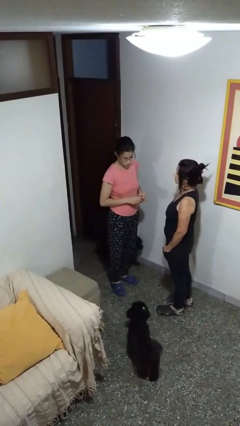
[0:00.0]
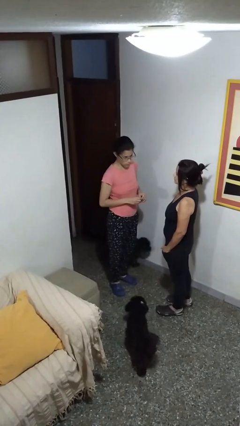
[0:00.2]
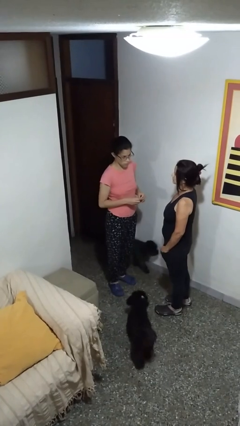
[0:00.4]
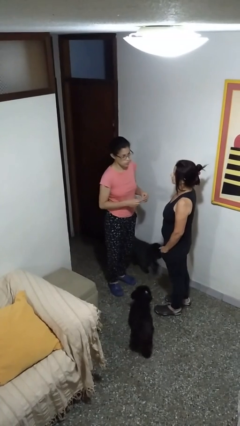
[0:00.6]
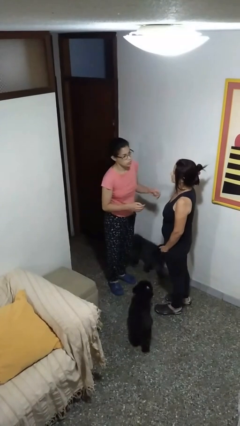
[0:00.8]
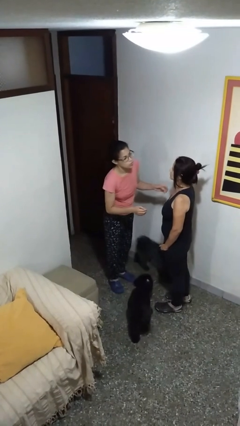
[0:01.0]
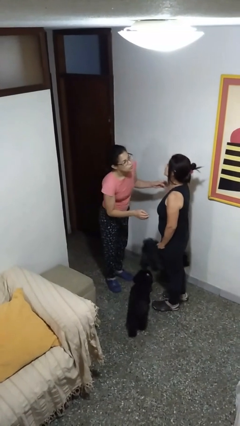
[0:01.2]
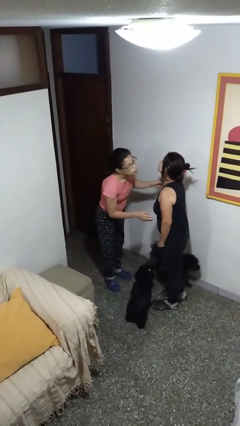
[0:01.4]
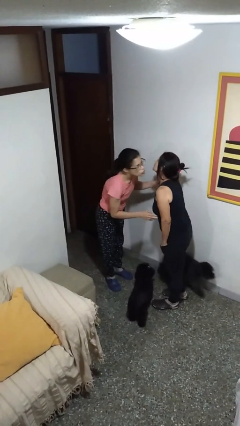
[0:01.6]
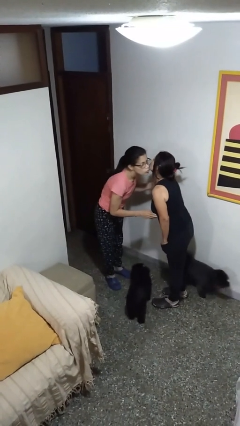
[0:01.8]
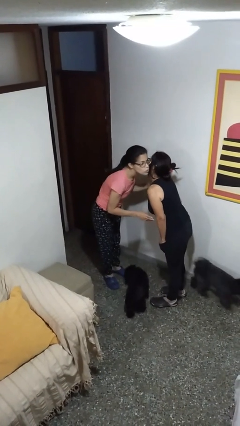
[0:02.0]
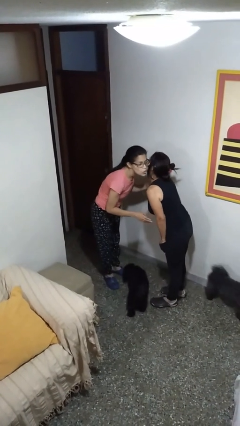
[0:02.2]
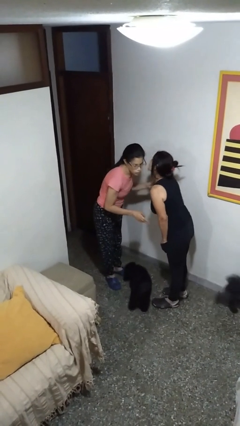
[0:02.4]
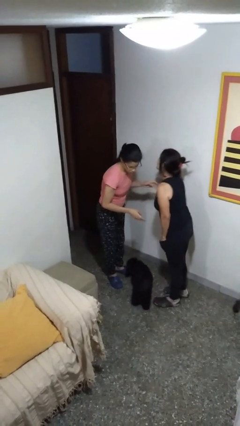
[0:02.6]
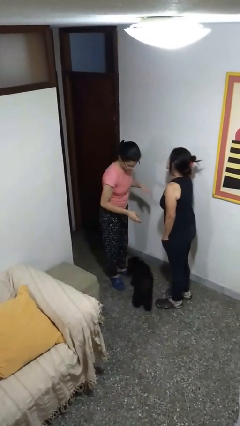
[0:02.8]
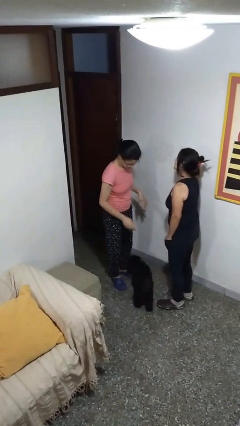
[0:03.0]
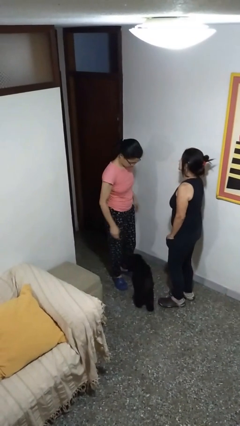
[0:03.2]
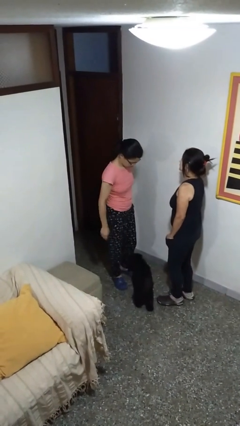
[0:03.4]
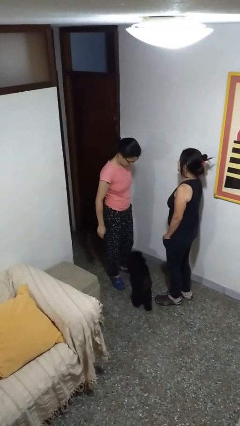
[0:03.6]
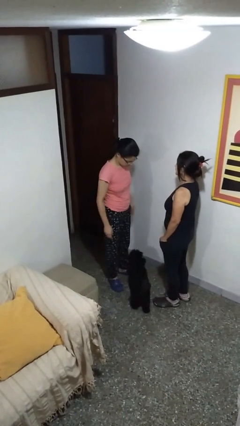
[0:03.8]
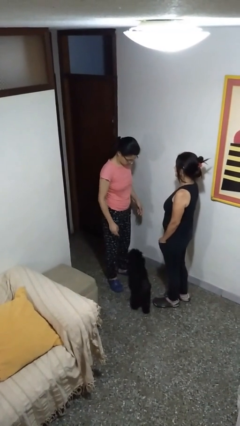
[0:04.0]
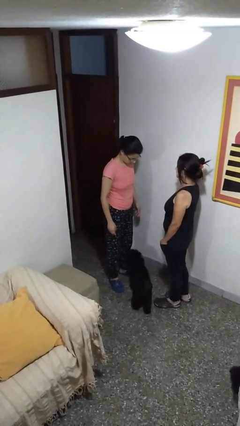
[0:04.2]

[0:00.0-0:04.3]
person kisses cheek of person

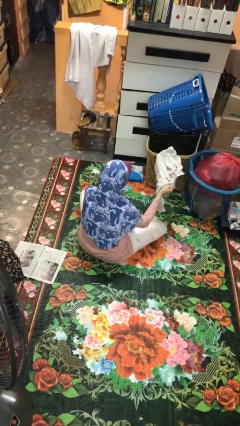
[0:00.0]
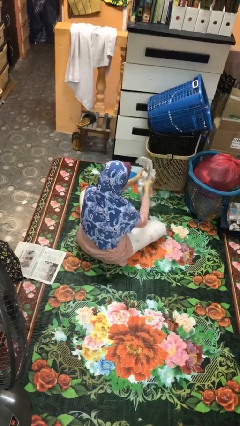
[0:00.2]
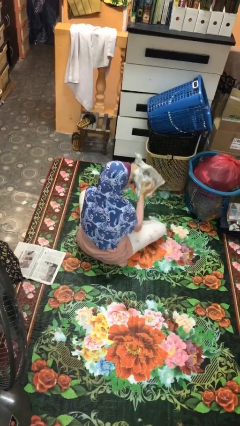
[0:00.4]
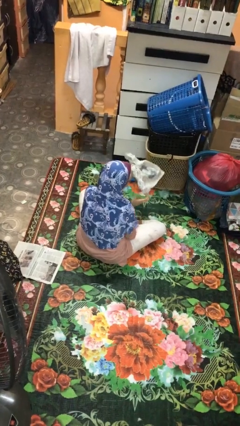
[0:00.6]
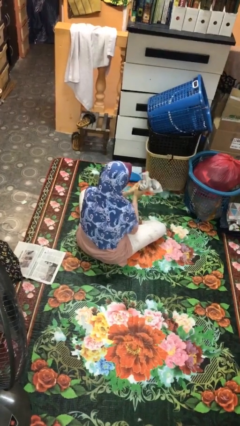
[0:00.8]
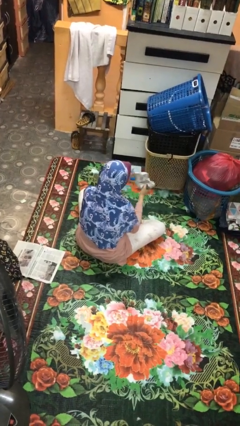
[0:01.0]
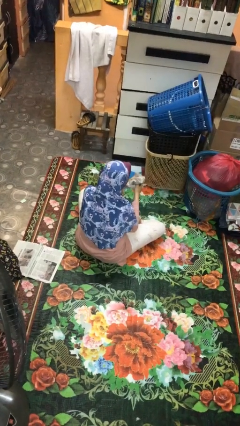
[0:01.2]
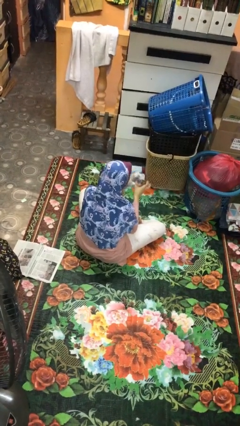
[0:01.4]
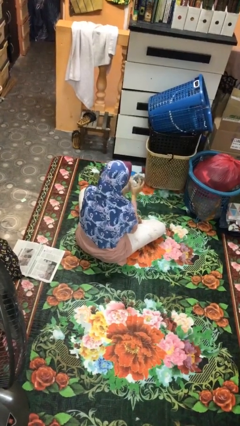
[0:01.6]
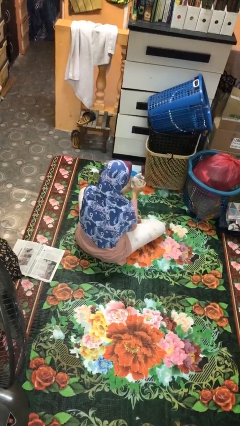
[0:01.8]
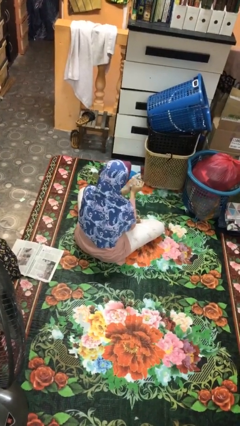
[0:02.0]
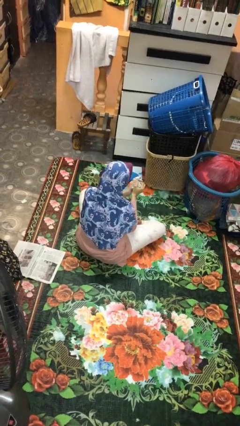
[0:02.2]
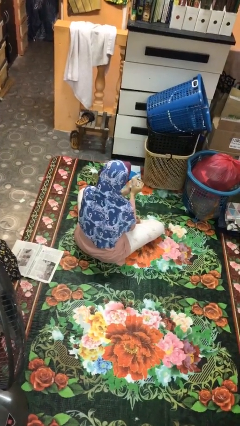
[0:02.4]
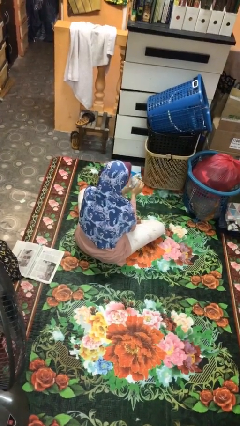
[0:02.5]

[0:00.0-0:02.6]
person crumples paper

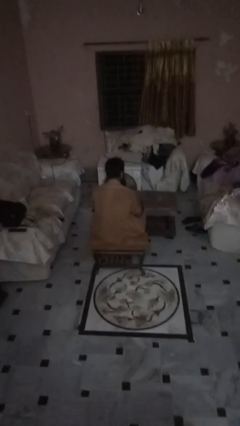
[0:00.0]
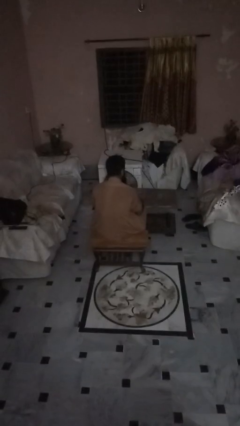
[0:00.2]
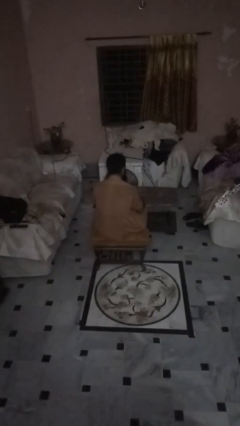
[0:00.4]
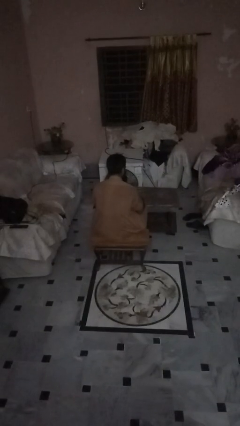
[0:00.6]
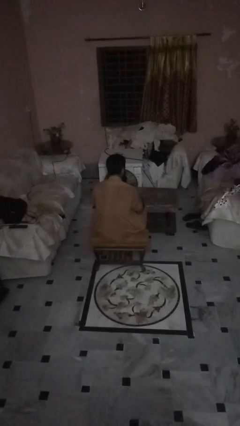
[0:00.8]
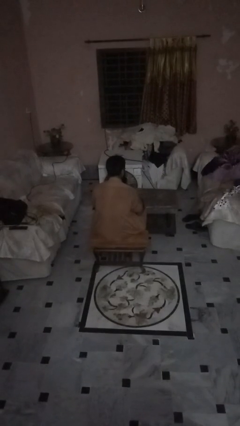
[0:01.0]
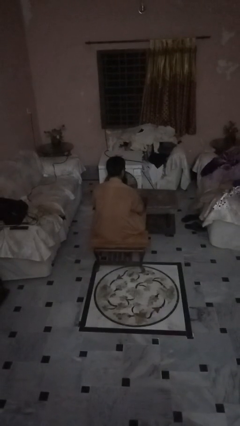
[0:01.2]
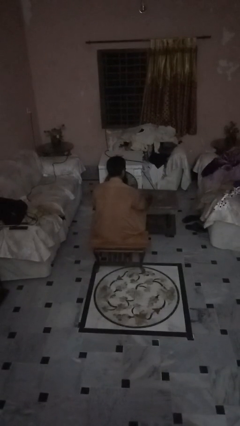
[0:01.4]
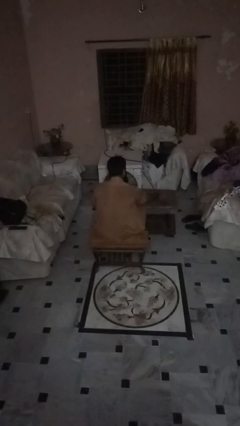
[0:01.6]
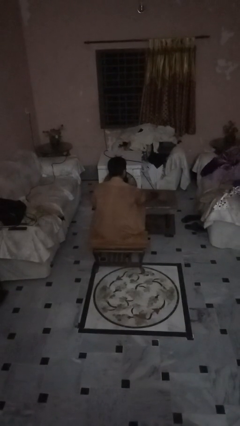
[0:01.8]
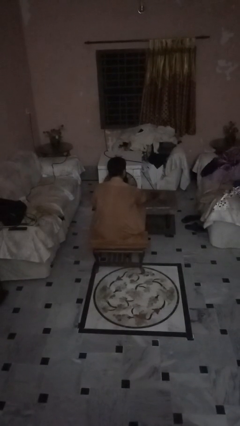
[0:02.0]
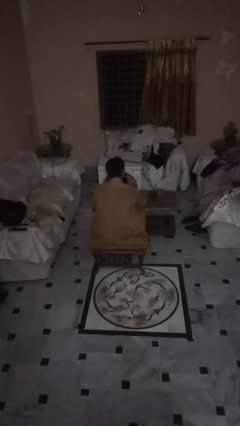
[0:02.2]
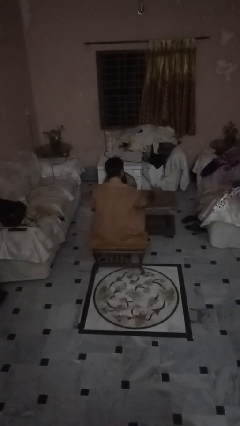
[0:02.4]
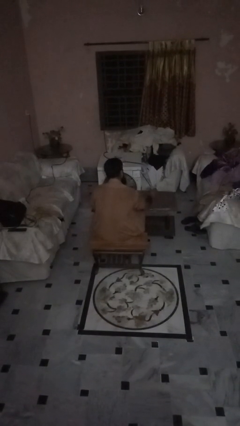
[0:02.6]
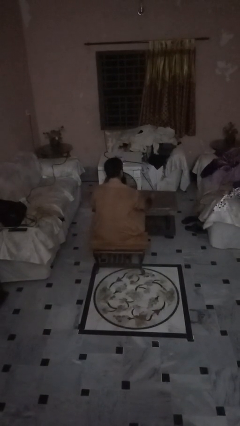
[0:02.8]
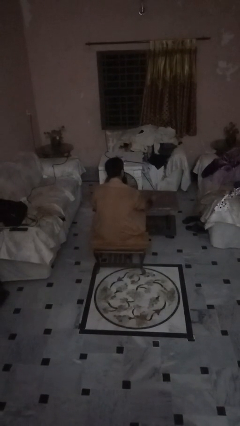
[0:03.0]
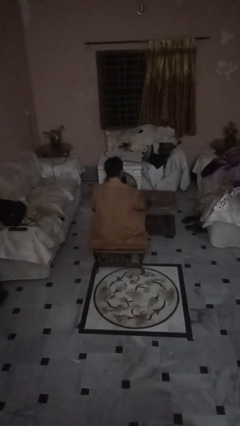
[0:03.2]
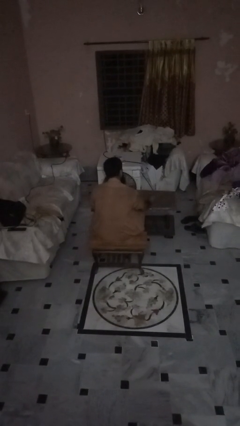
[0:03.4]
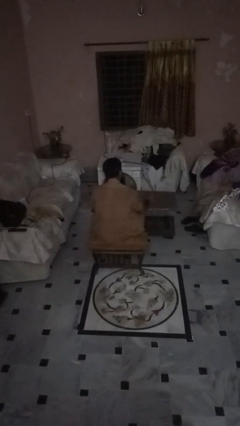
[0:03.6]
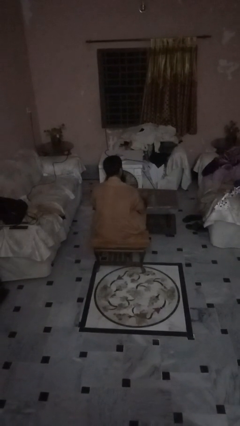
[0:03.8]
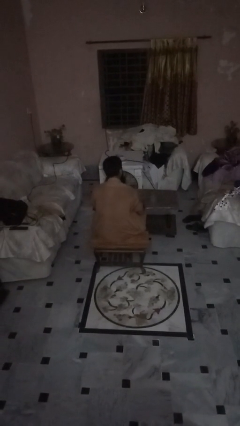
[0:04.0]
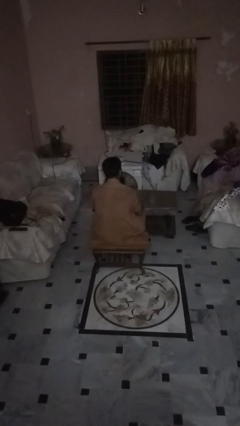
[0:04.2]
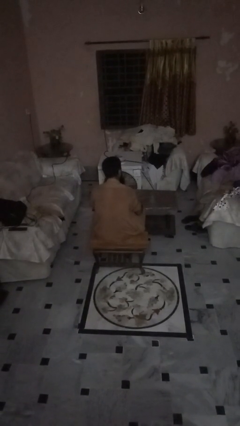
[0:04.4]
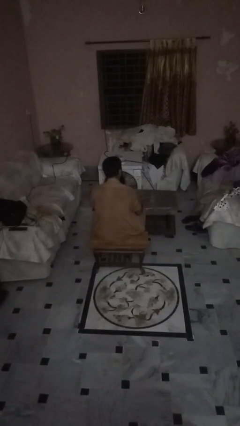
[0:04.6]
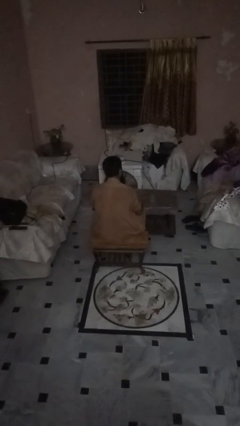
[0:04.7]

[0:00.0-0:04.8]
person sets upright glass

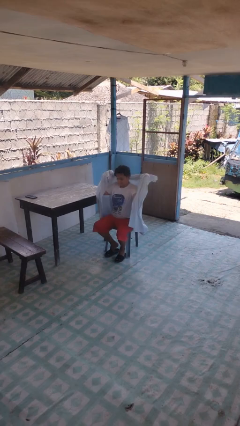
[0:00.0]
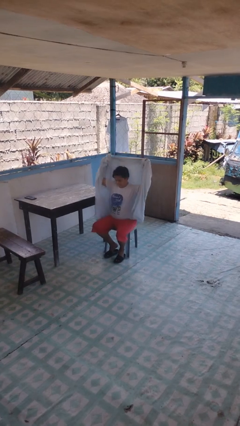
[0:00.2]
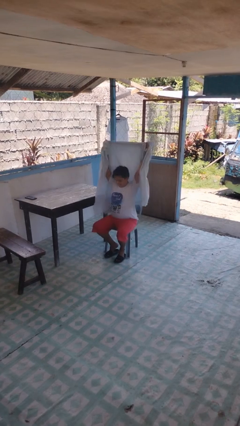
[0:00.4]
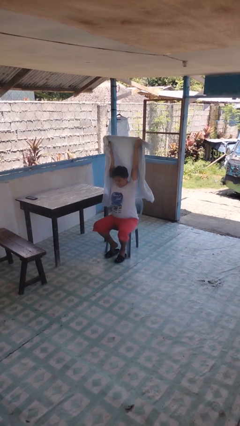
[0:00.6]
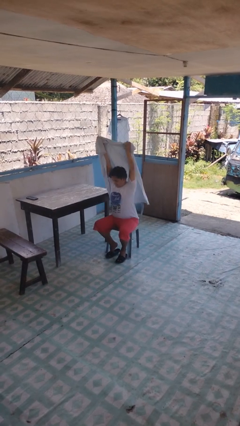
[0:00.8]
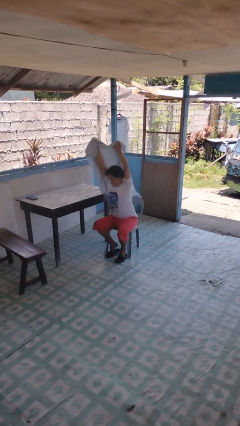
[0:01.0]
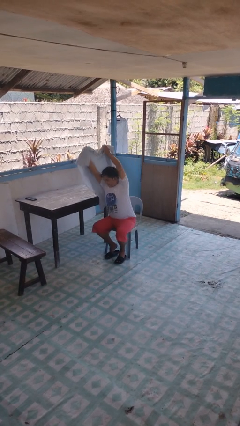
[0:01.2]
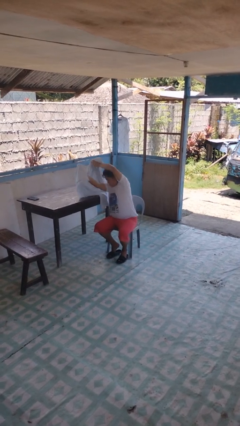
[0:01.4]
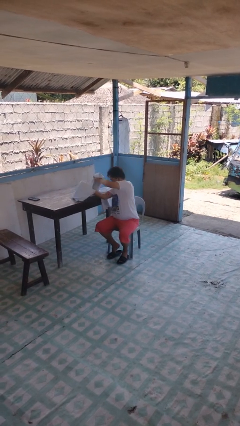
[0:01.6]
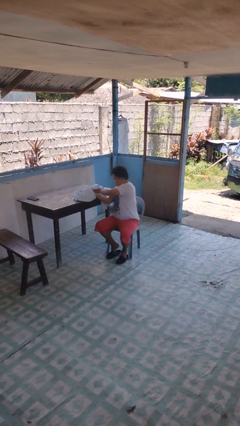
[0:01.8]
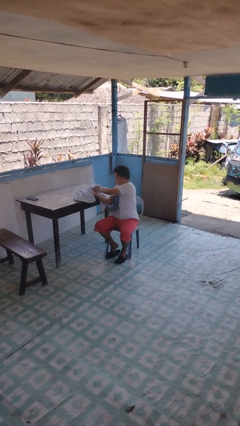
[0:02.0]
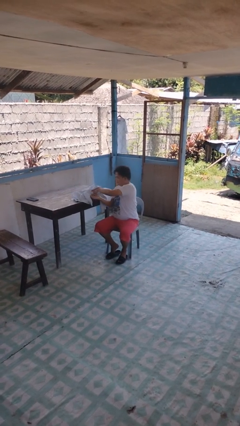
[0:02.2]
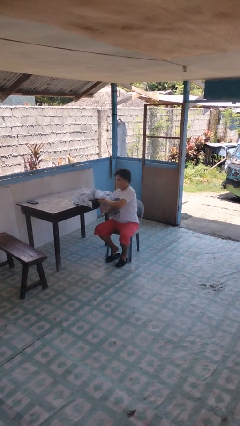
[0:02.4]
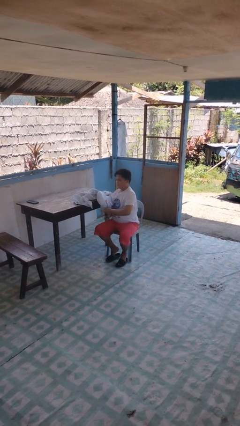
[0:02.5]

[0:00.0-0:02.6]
person uncovers with blanket

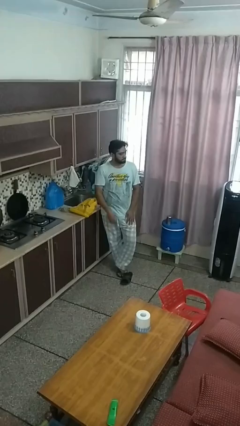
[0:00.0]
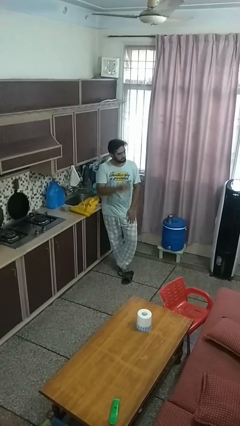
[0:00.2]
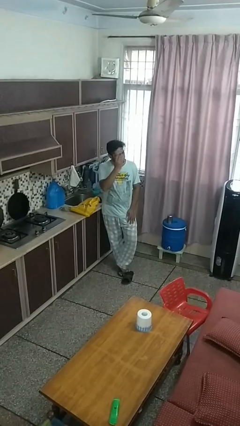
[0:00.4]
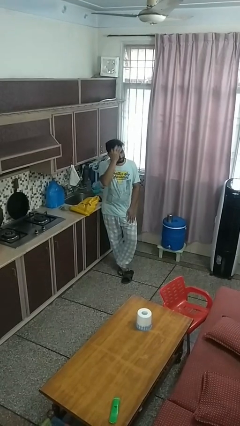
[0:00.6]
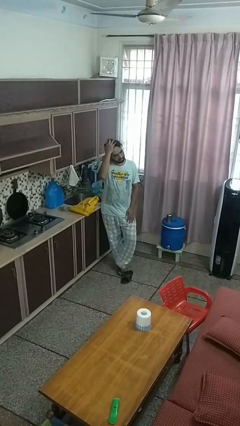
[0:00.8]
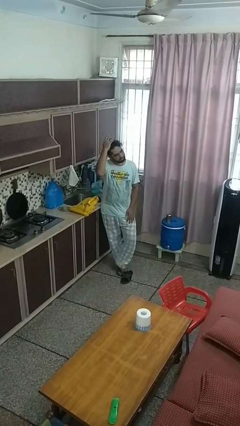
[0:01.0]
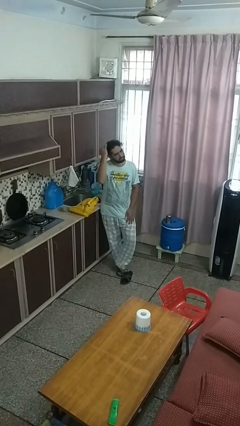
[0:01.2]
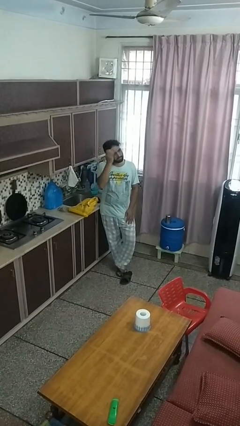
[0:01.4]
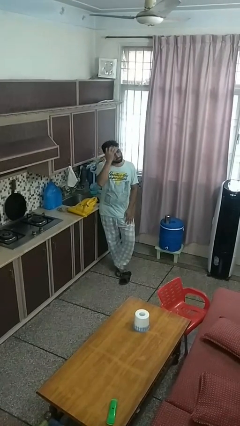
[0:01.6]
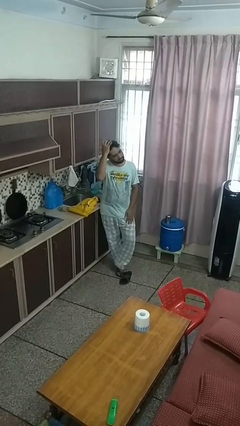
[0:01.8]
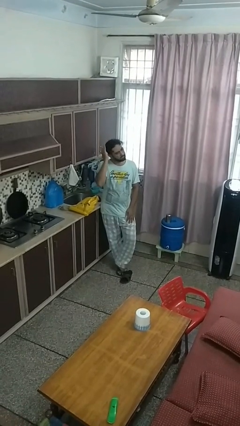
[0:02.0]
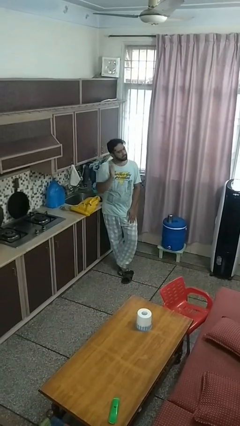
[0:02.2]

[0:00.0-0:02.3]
person strokes hair

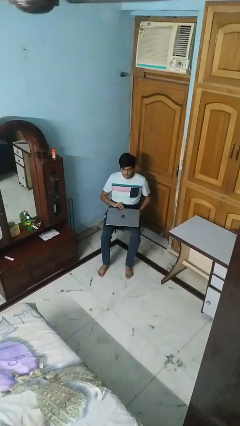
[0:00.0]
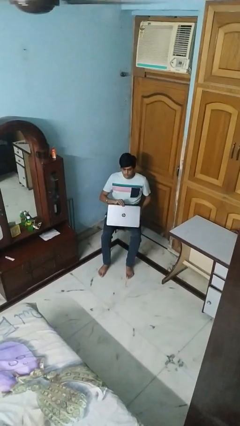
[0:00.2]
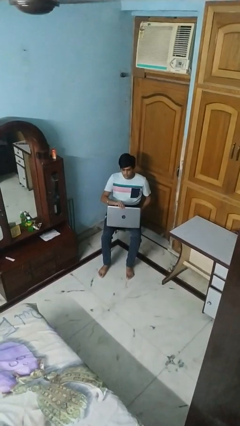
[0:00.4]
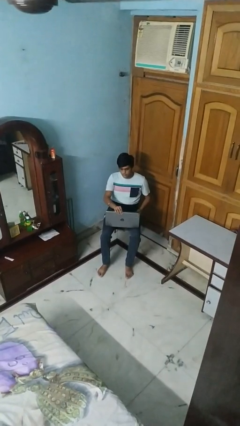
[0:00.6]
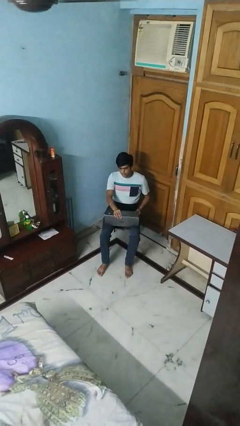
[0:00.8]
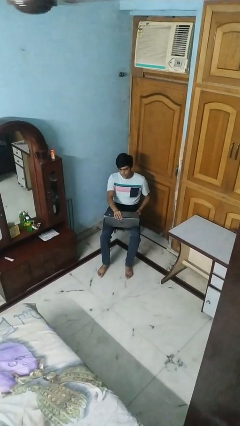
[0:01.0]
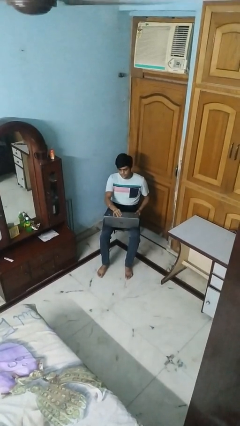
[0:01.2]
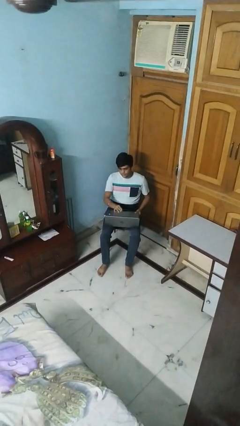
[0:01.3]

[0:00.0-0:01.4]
person opens laptop
